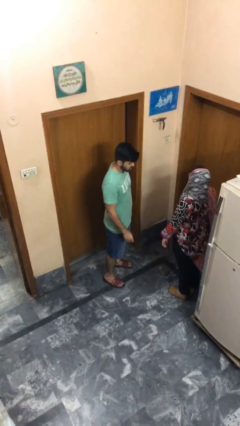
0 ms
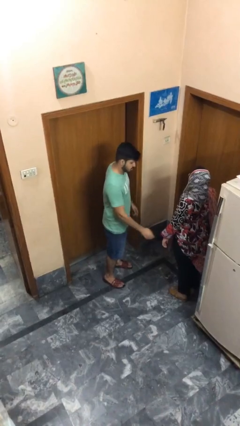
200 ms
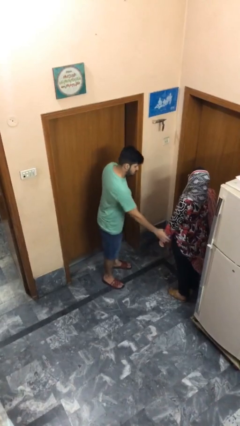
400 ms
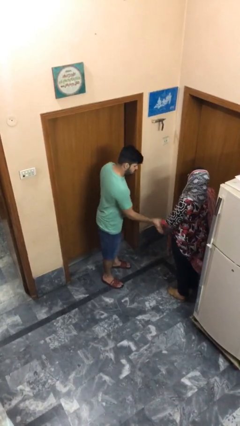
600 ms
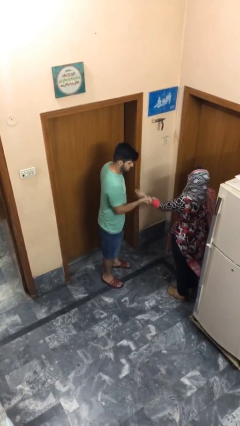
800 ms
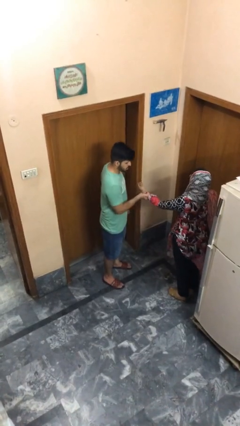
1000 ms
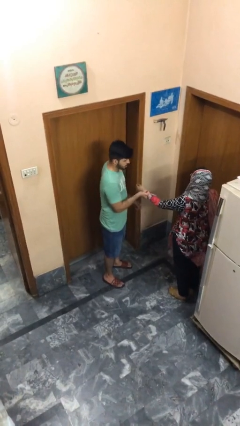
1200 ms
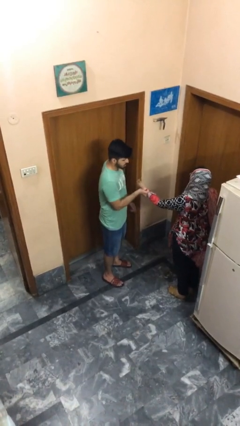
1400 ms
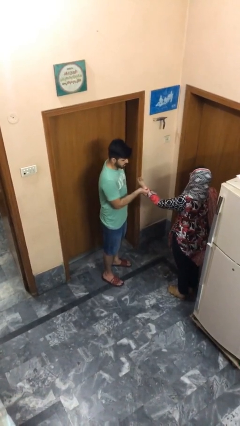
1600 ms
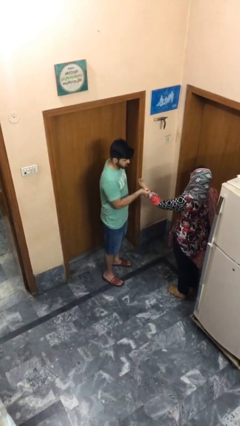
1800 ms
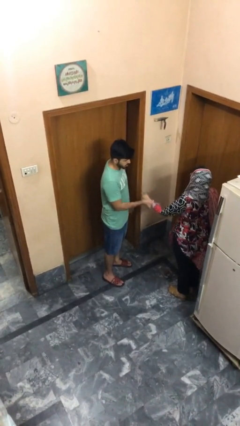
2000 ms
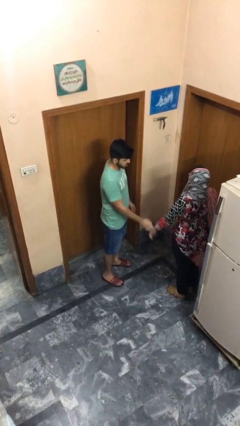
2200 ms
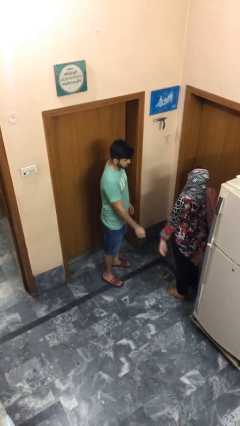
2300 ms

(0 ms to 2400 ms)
person grabs person by forearm

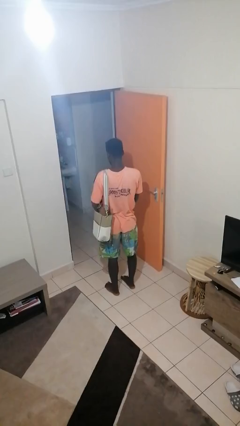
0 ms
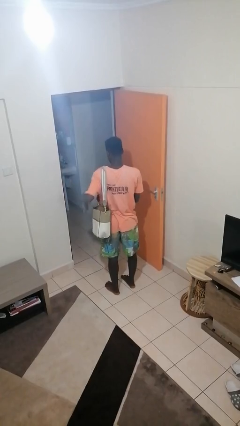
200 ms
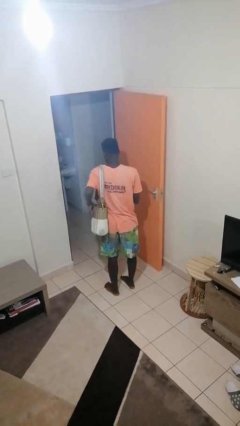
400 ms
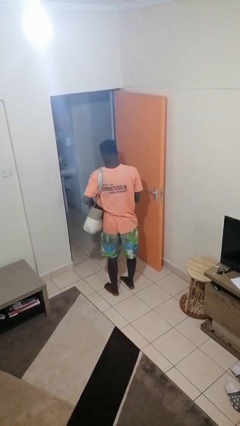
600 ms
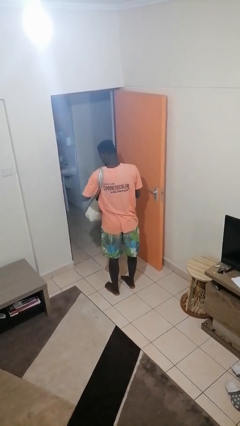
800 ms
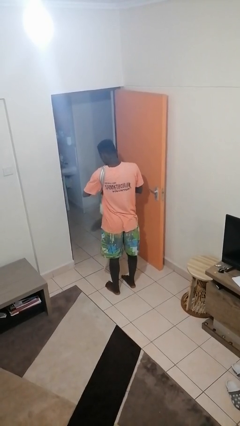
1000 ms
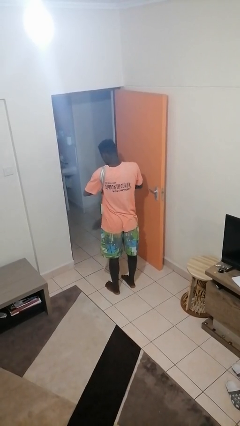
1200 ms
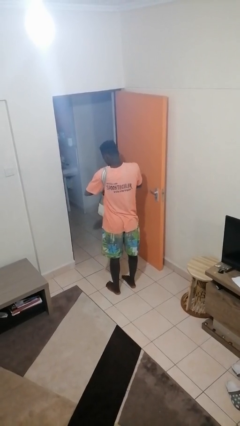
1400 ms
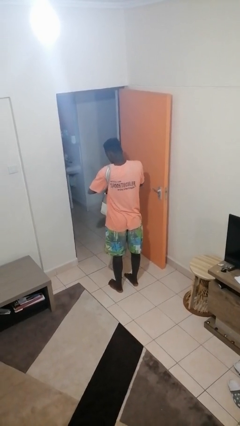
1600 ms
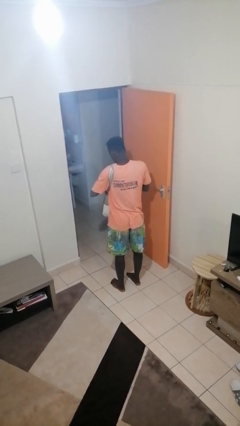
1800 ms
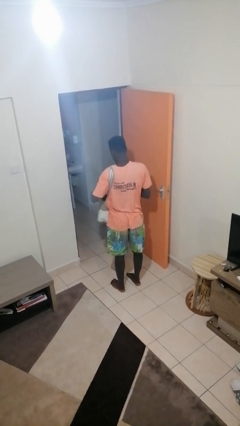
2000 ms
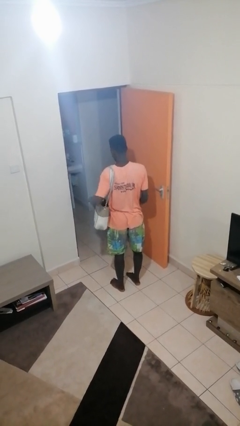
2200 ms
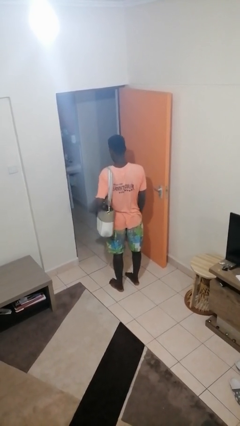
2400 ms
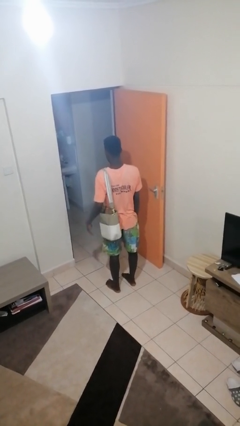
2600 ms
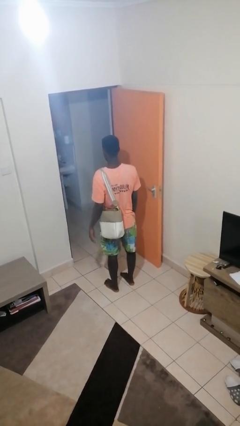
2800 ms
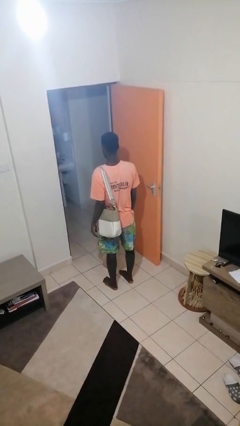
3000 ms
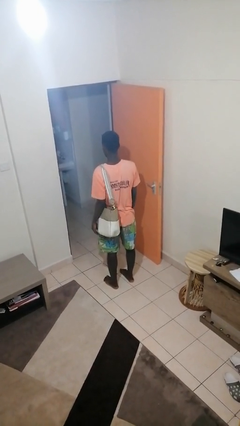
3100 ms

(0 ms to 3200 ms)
person puts object into purse

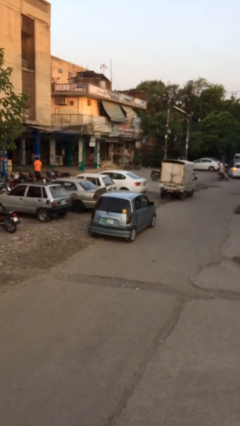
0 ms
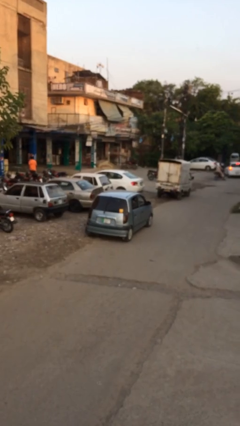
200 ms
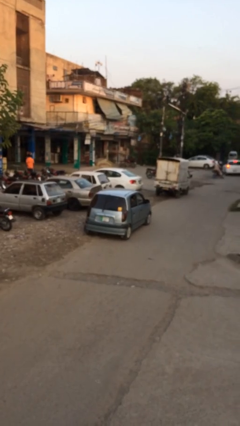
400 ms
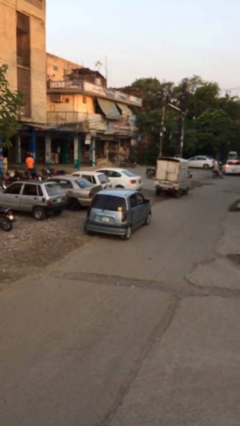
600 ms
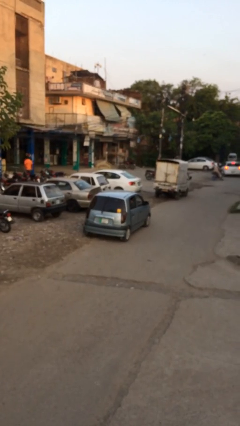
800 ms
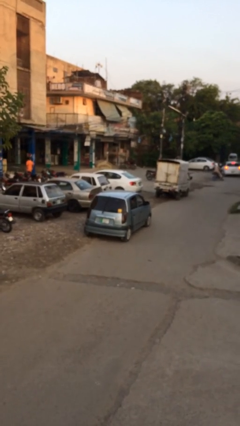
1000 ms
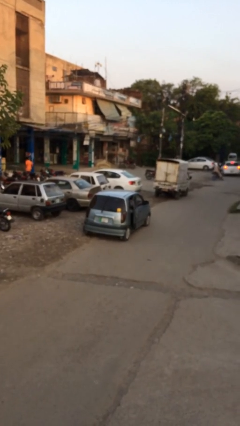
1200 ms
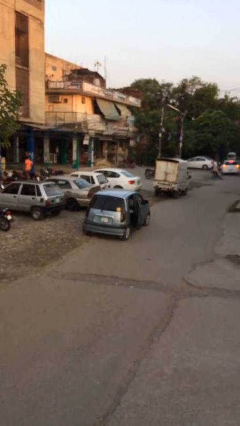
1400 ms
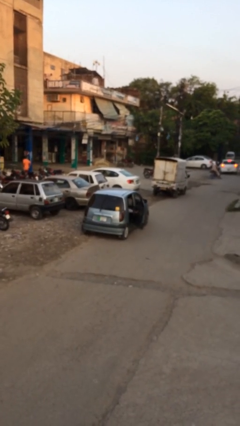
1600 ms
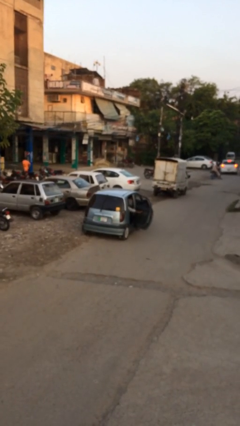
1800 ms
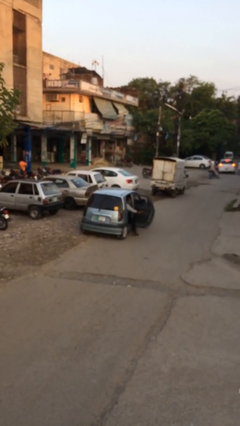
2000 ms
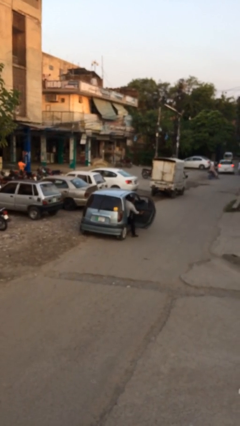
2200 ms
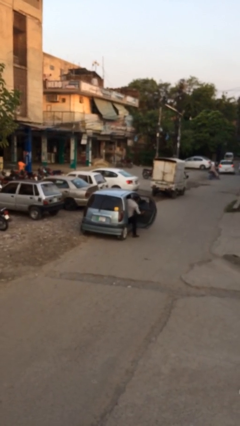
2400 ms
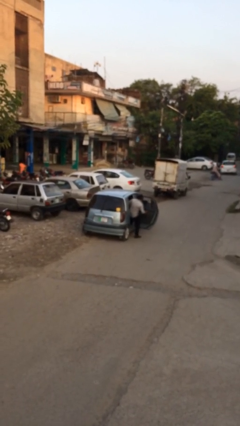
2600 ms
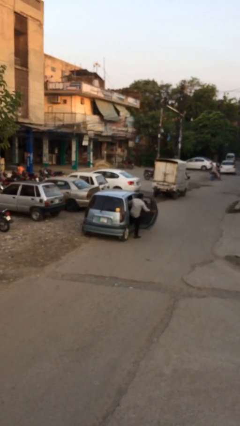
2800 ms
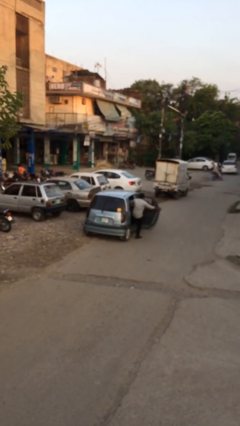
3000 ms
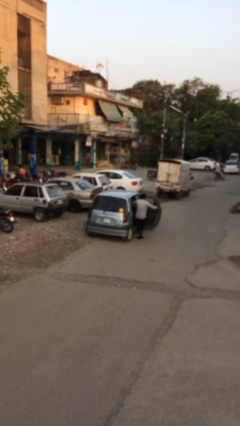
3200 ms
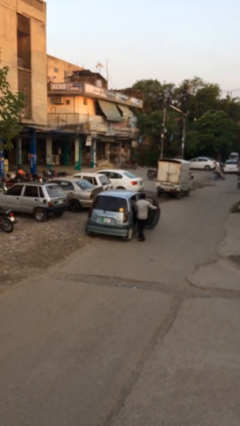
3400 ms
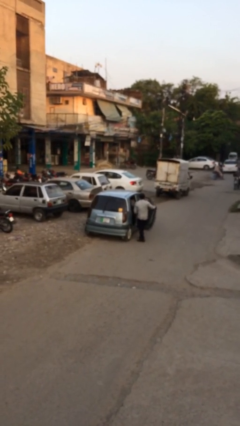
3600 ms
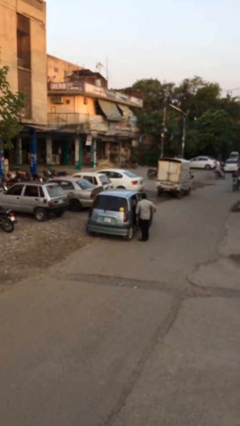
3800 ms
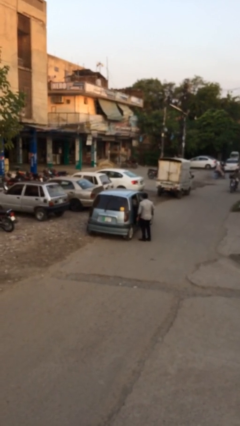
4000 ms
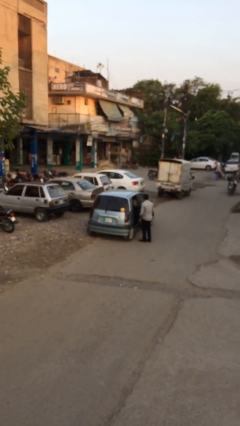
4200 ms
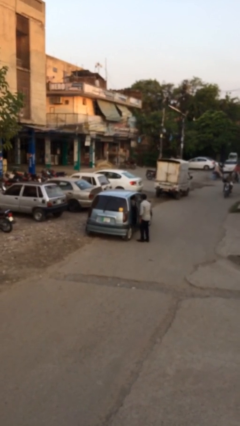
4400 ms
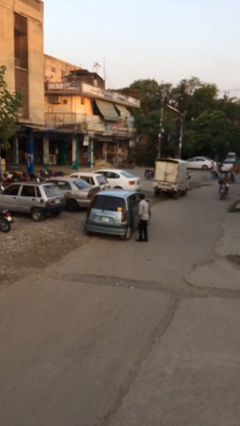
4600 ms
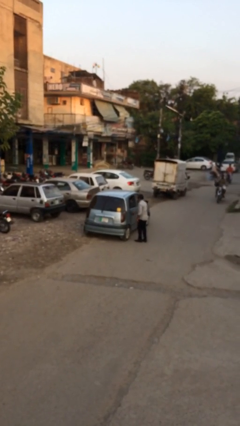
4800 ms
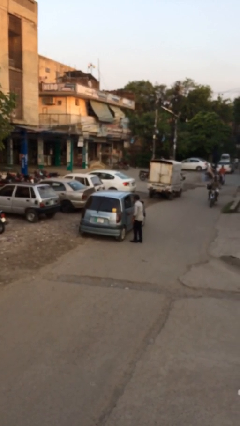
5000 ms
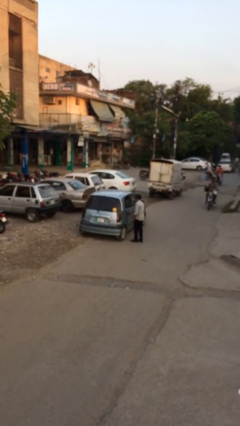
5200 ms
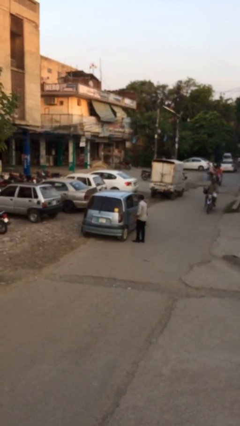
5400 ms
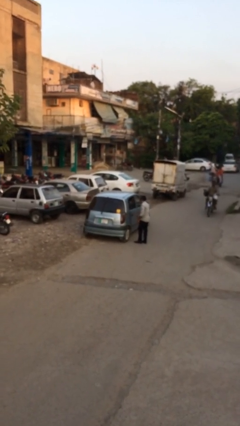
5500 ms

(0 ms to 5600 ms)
car drops off person

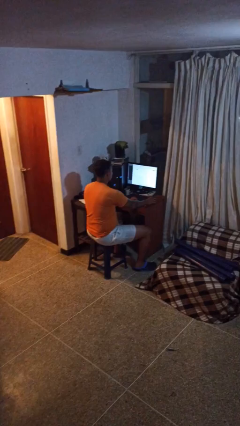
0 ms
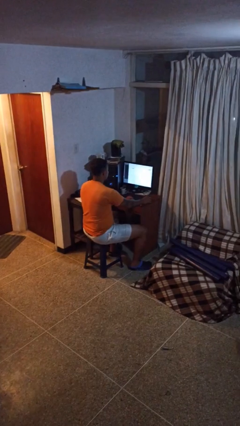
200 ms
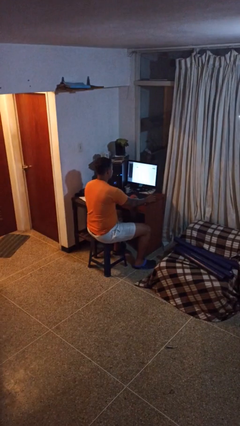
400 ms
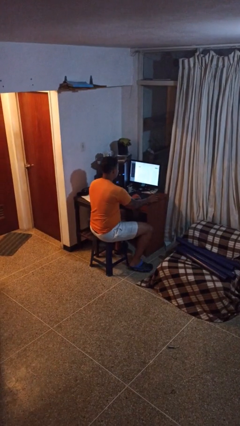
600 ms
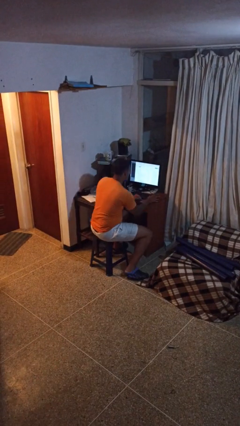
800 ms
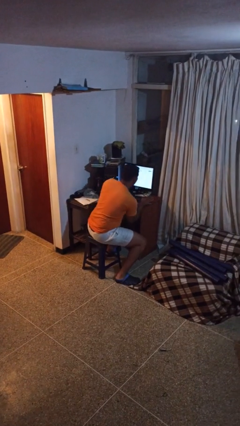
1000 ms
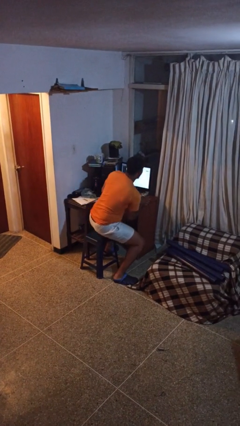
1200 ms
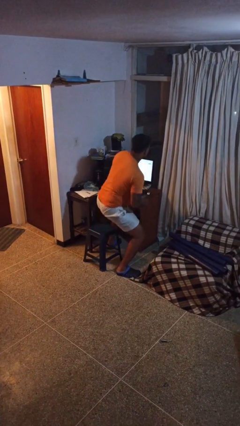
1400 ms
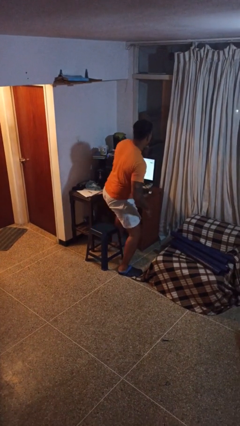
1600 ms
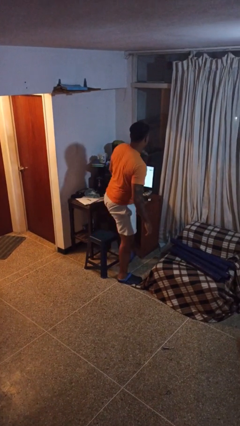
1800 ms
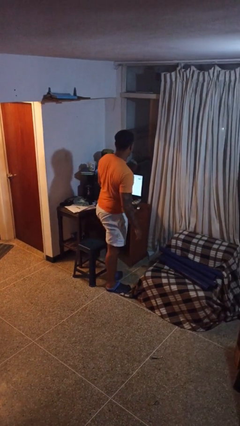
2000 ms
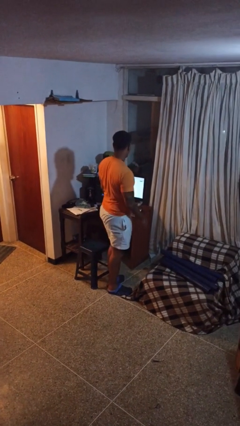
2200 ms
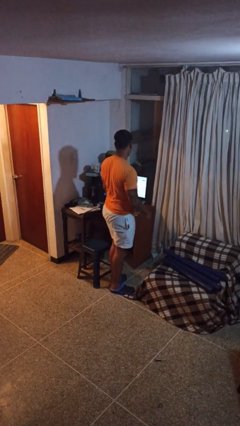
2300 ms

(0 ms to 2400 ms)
person stands up

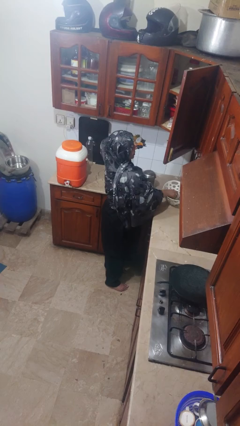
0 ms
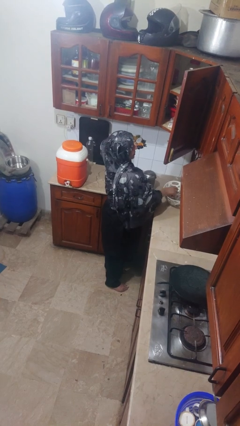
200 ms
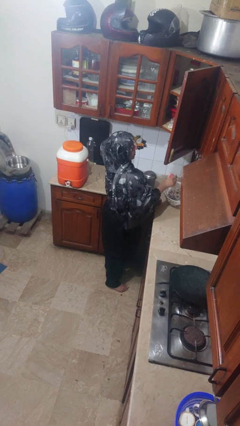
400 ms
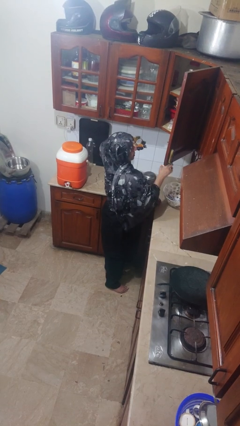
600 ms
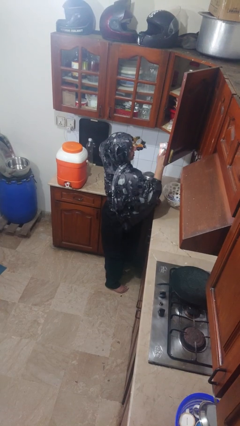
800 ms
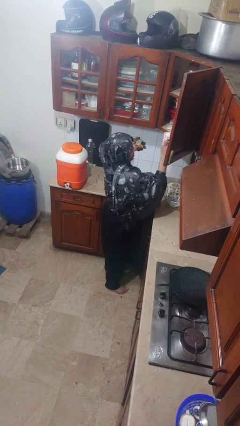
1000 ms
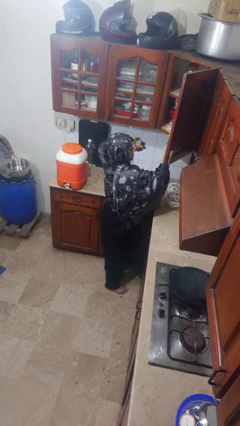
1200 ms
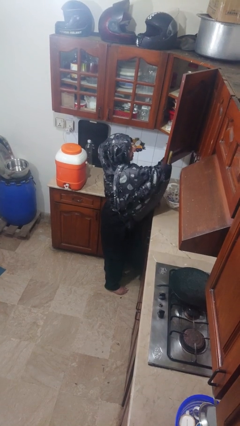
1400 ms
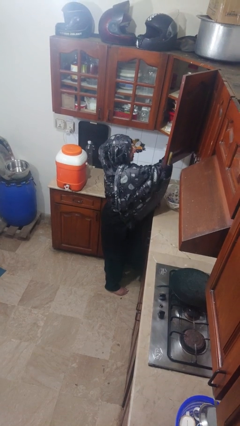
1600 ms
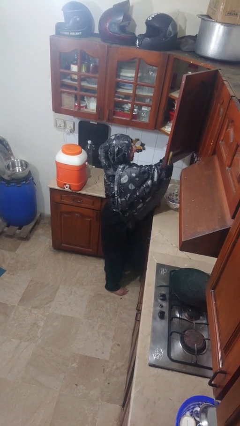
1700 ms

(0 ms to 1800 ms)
person loads groceries into cabinet

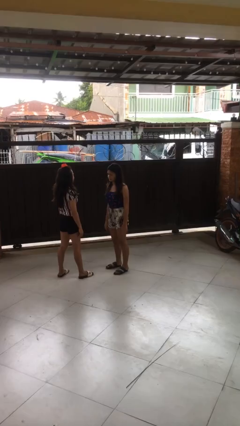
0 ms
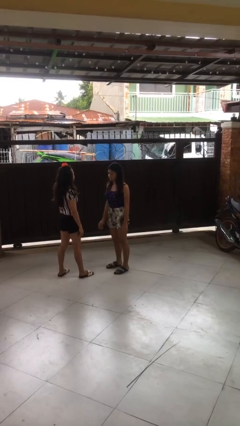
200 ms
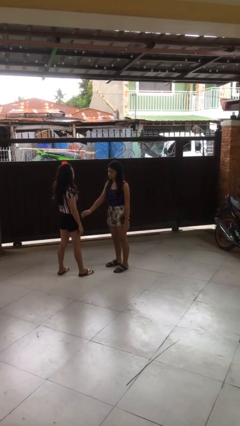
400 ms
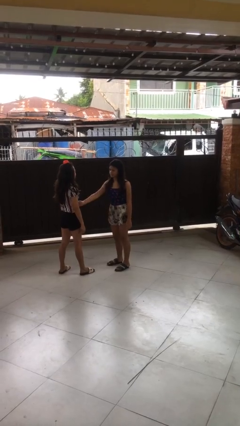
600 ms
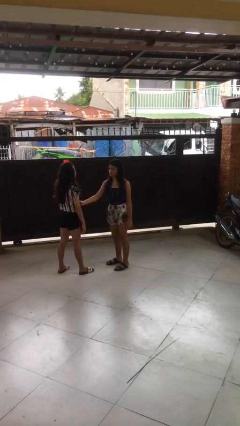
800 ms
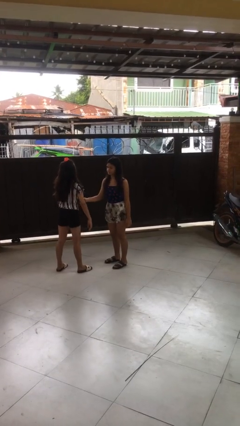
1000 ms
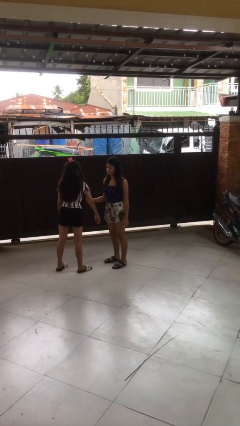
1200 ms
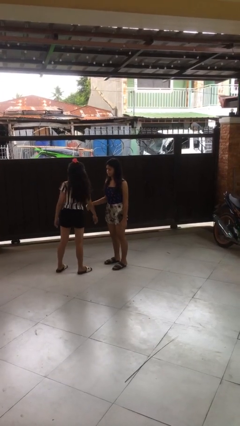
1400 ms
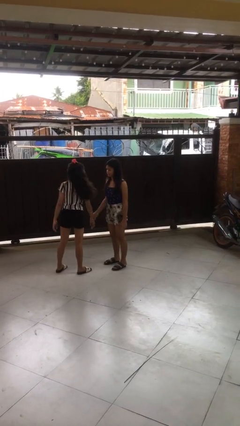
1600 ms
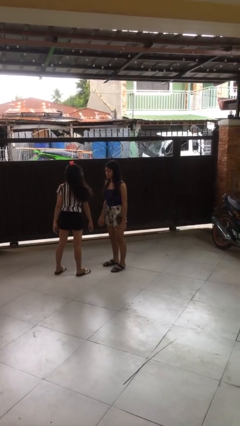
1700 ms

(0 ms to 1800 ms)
person grabs person by bicep

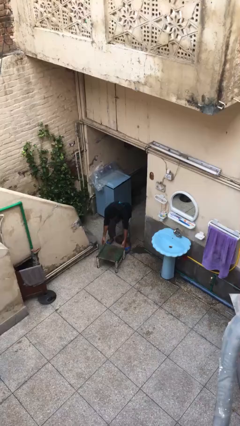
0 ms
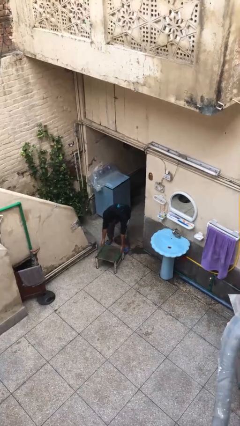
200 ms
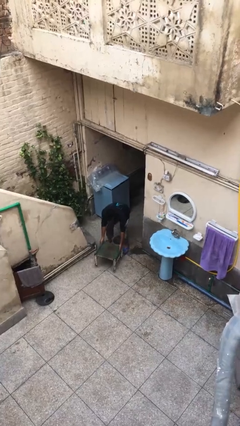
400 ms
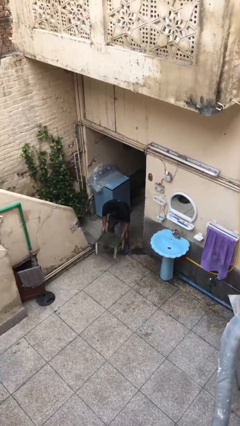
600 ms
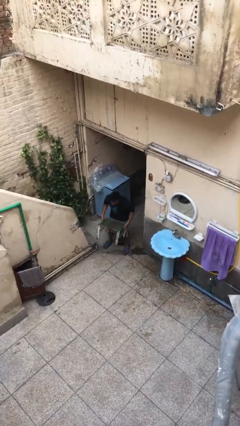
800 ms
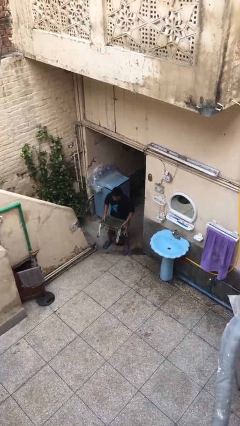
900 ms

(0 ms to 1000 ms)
person picks up object from floor
